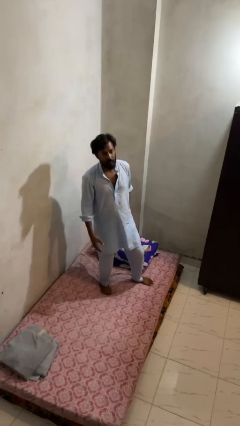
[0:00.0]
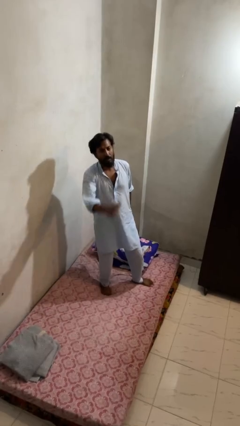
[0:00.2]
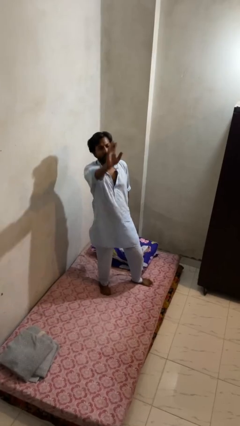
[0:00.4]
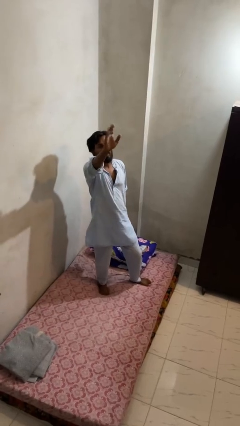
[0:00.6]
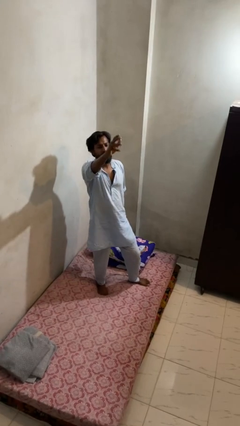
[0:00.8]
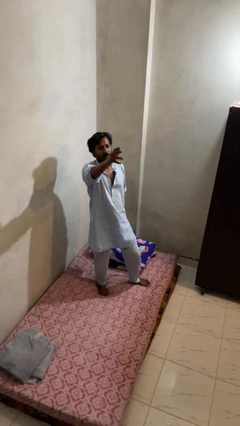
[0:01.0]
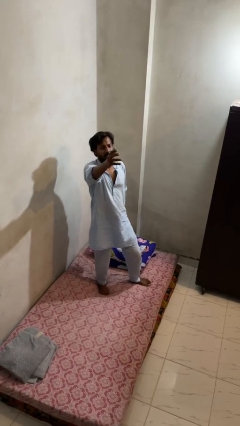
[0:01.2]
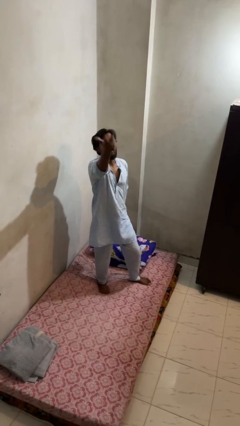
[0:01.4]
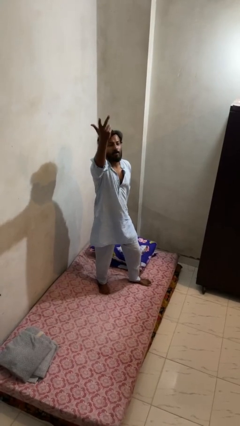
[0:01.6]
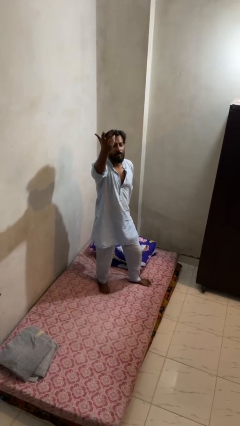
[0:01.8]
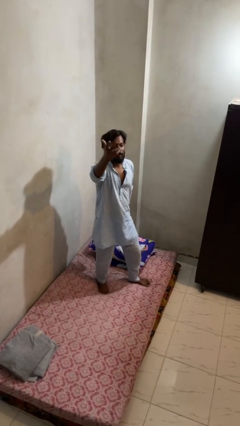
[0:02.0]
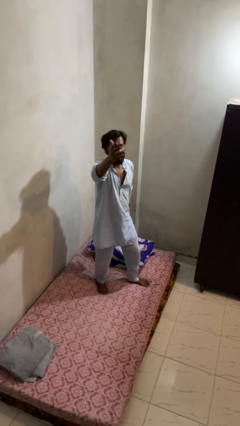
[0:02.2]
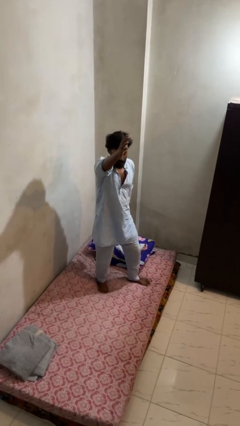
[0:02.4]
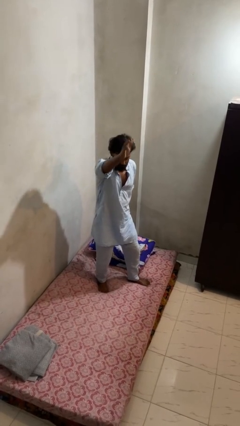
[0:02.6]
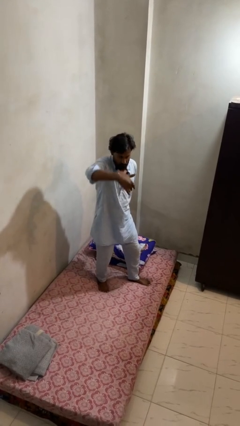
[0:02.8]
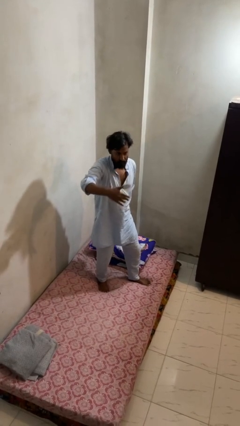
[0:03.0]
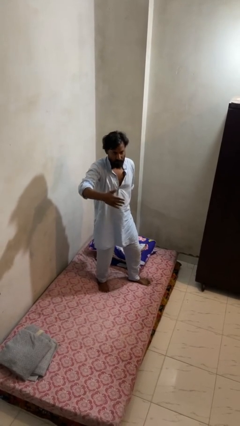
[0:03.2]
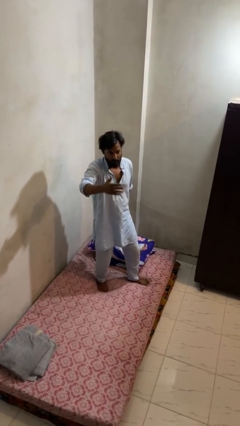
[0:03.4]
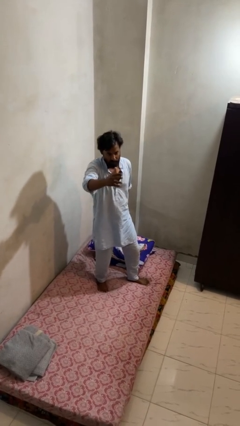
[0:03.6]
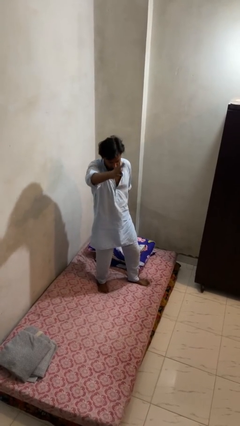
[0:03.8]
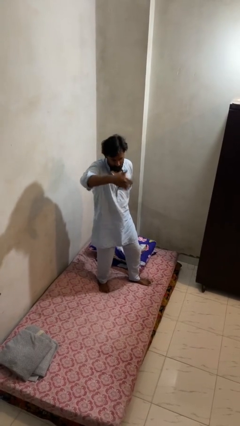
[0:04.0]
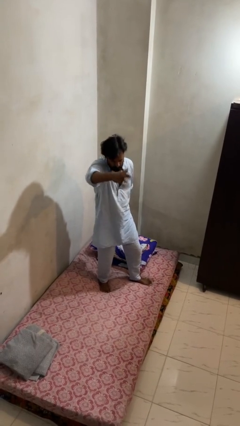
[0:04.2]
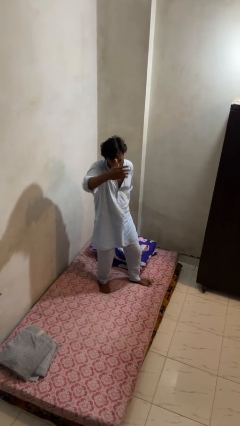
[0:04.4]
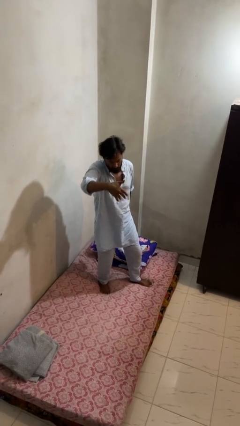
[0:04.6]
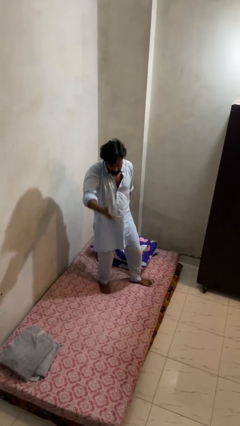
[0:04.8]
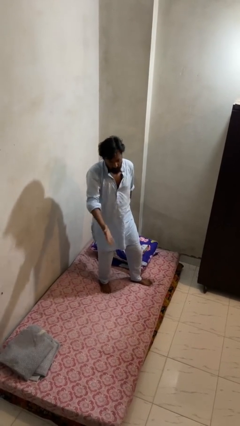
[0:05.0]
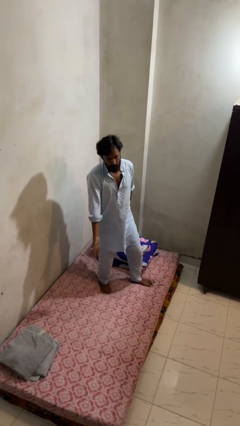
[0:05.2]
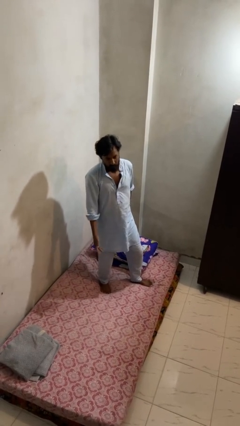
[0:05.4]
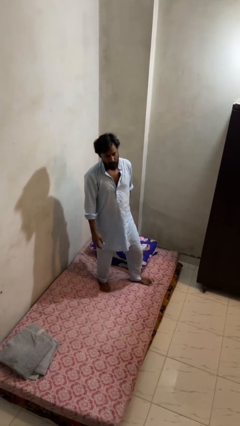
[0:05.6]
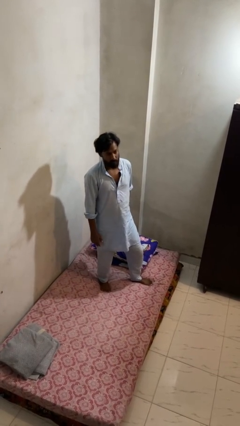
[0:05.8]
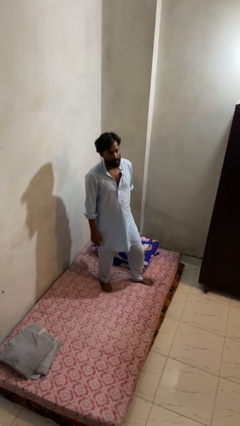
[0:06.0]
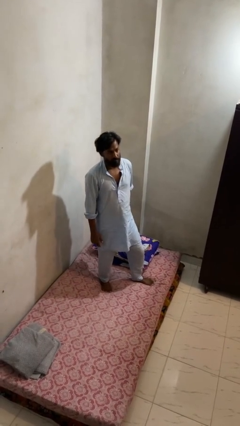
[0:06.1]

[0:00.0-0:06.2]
person gestures come here

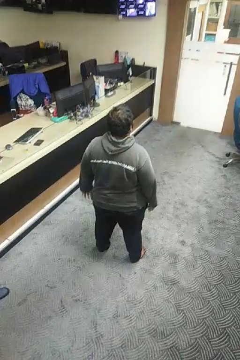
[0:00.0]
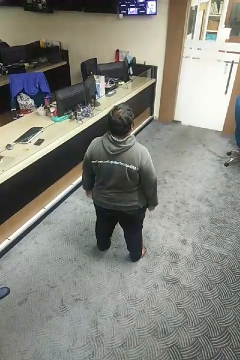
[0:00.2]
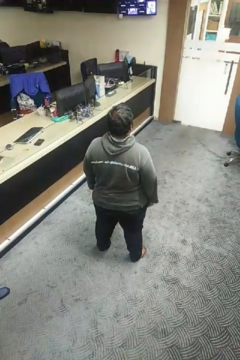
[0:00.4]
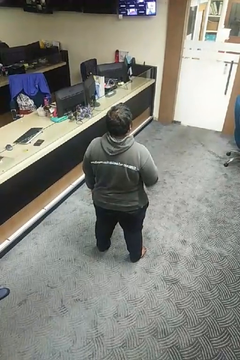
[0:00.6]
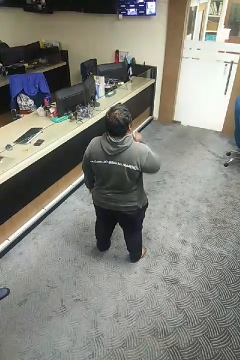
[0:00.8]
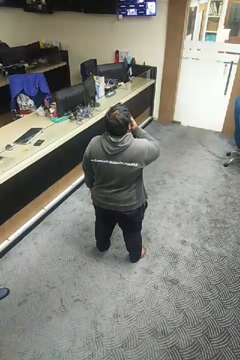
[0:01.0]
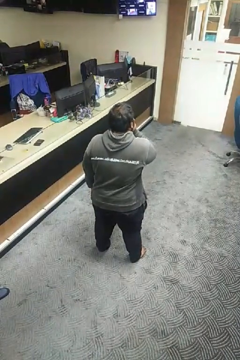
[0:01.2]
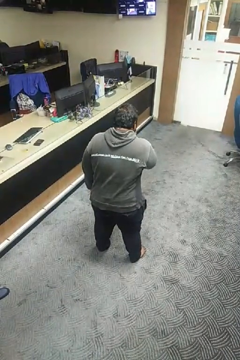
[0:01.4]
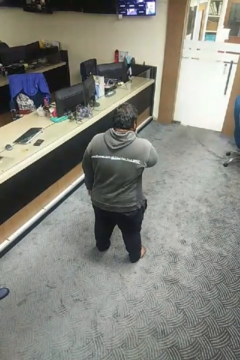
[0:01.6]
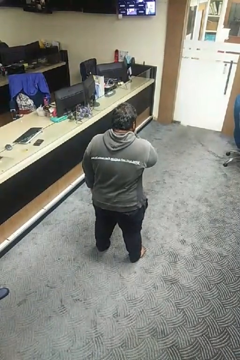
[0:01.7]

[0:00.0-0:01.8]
person sneezes into hand

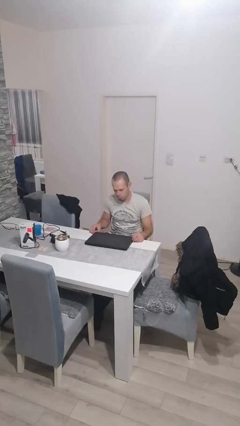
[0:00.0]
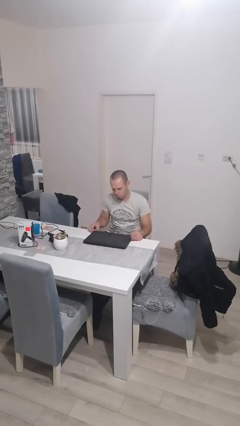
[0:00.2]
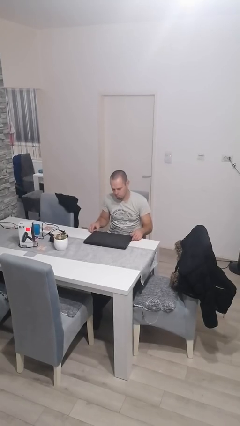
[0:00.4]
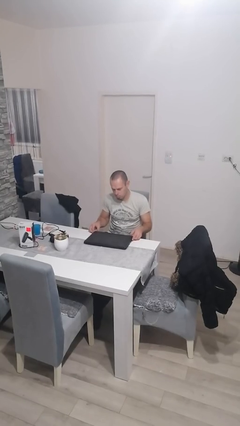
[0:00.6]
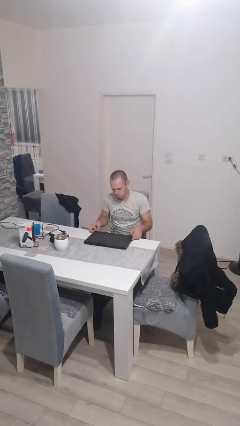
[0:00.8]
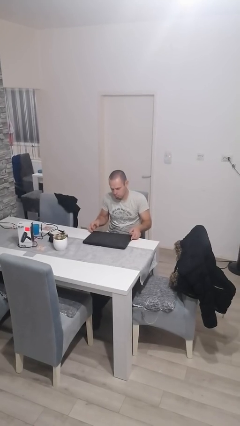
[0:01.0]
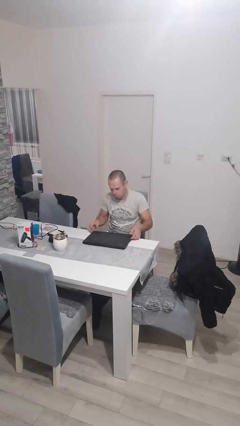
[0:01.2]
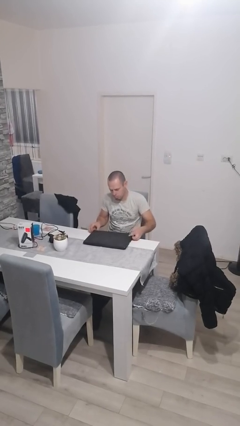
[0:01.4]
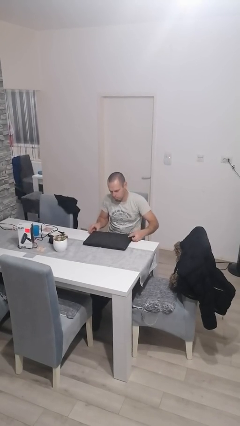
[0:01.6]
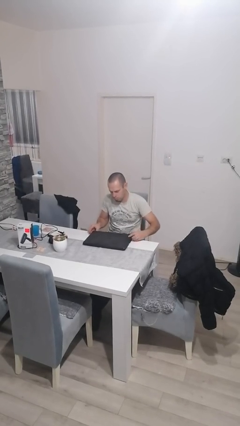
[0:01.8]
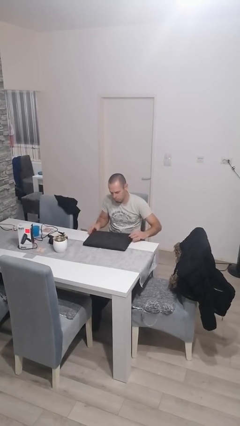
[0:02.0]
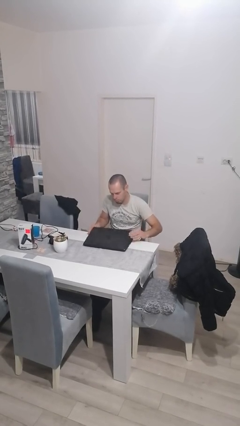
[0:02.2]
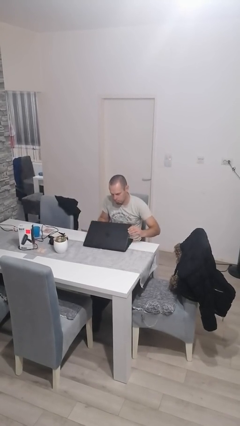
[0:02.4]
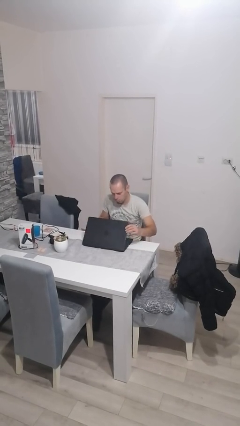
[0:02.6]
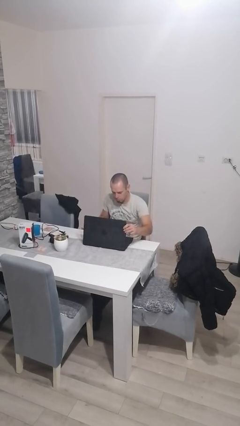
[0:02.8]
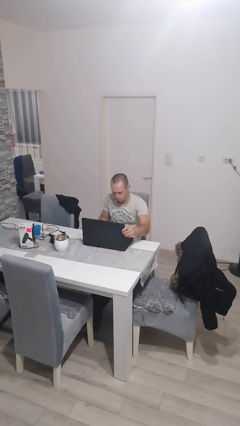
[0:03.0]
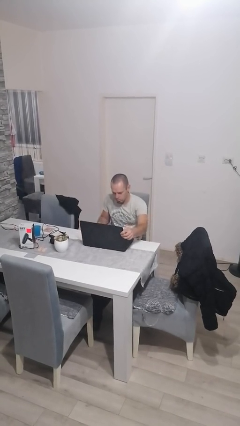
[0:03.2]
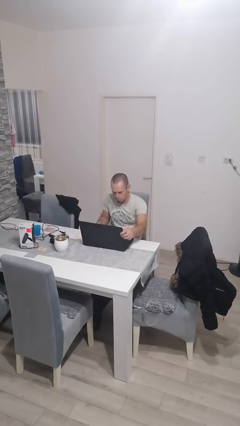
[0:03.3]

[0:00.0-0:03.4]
person opens laptop

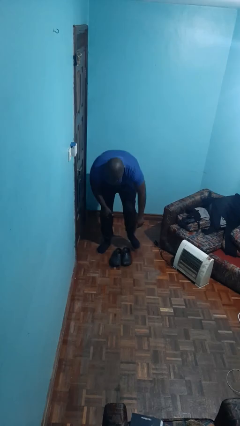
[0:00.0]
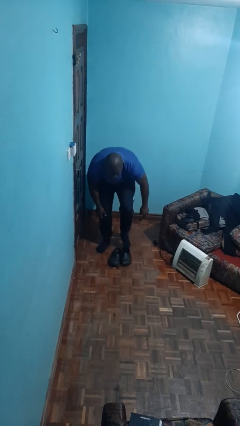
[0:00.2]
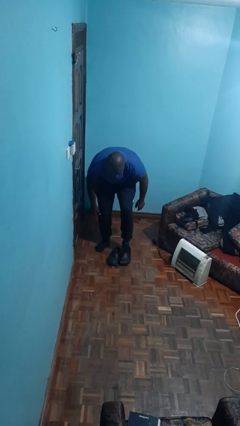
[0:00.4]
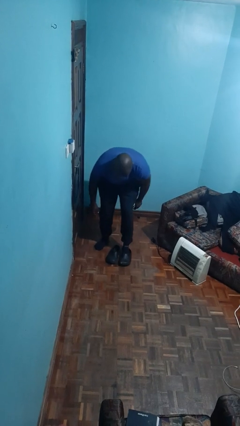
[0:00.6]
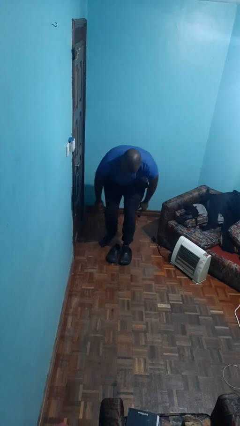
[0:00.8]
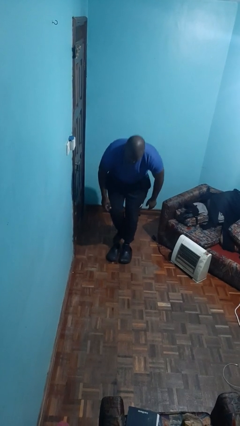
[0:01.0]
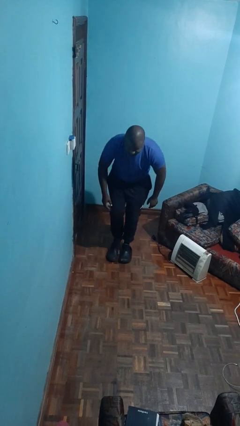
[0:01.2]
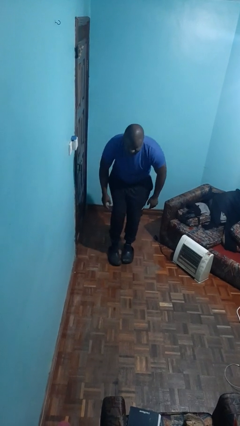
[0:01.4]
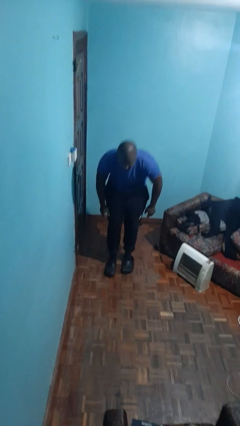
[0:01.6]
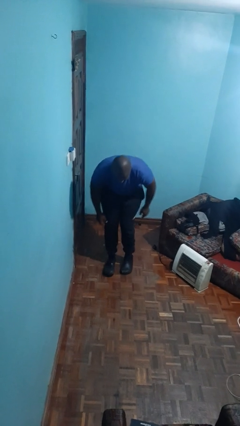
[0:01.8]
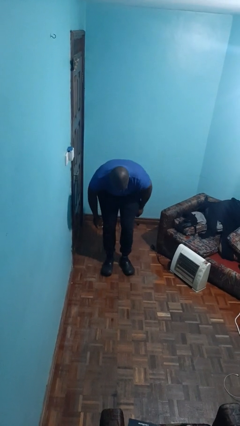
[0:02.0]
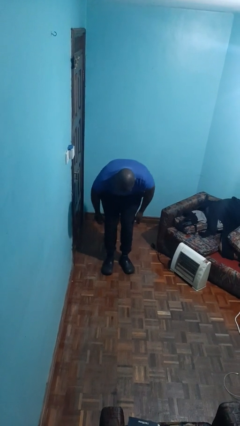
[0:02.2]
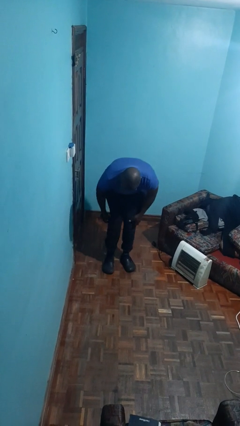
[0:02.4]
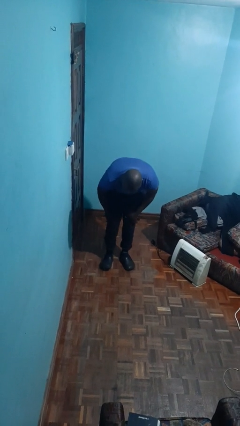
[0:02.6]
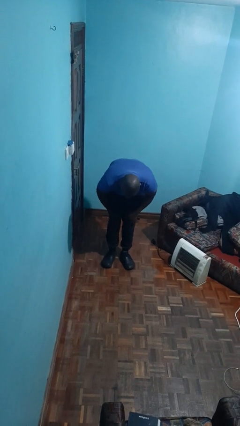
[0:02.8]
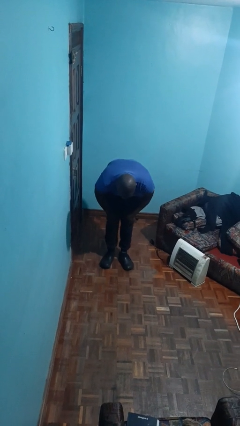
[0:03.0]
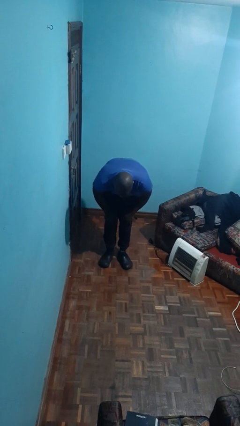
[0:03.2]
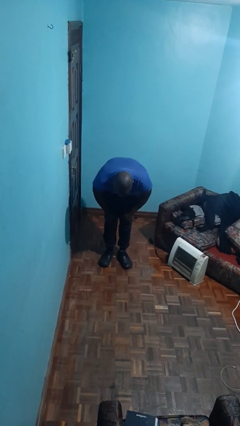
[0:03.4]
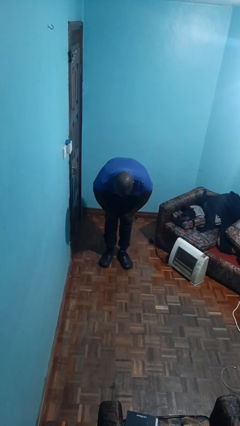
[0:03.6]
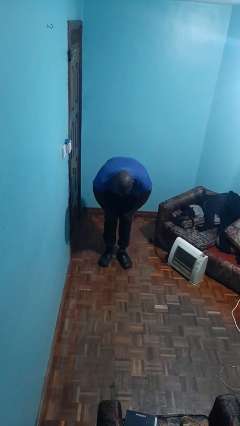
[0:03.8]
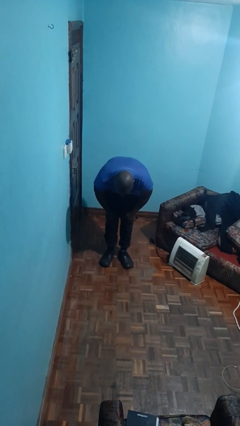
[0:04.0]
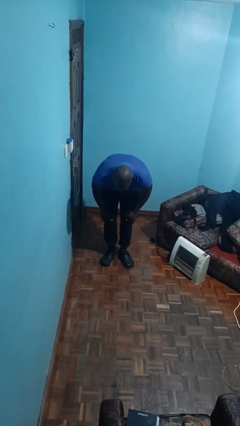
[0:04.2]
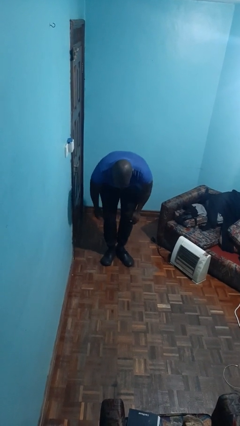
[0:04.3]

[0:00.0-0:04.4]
person puts on shoes

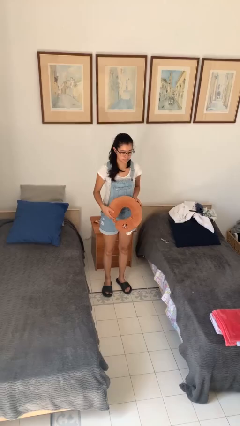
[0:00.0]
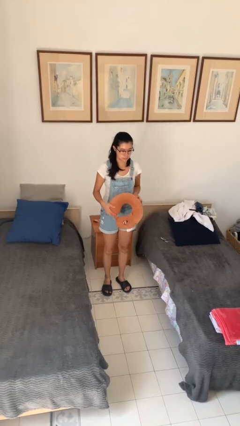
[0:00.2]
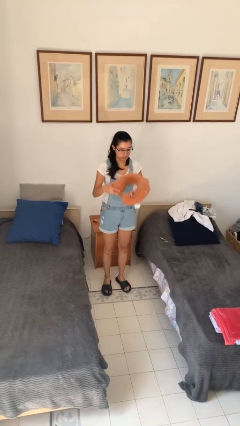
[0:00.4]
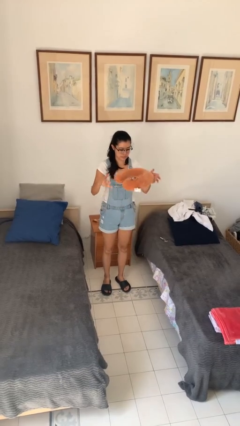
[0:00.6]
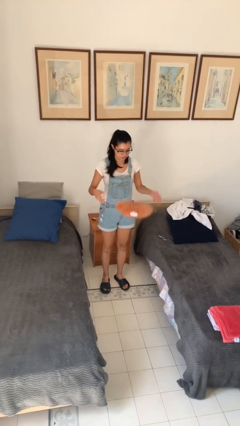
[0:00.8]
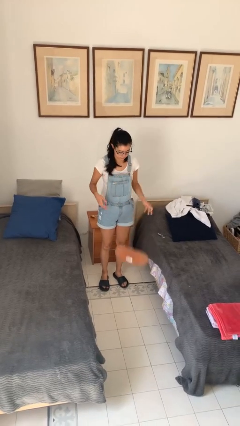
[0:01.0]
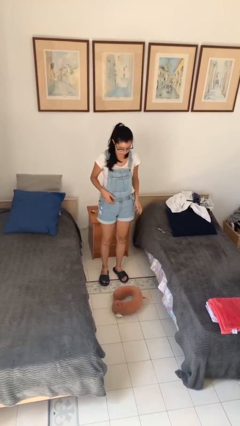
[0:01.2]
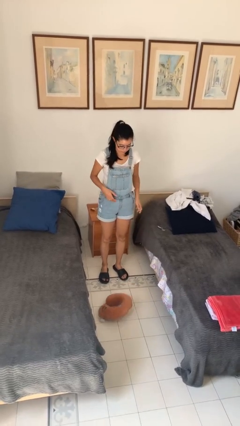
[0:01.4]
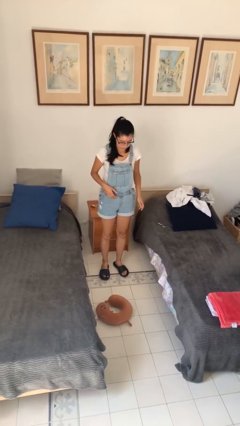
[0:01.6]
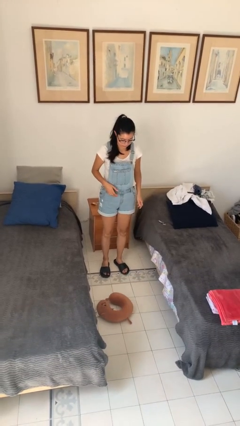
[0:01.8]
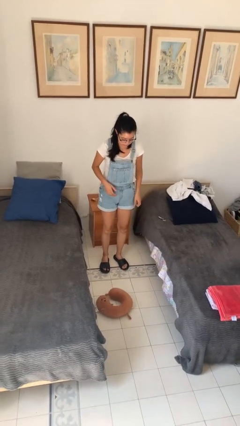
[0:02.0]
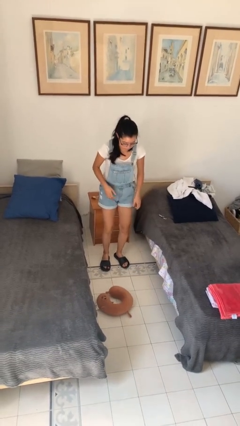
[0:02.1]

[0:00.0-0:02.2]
person throws object into air

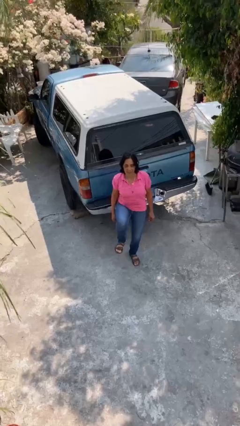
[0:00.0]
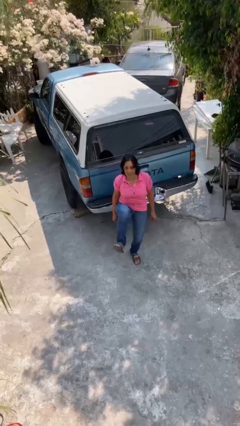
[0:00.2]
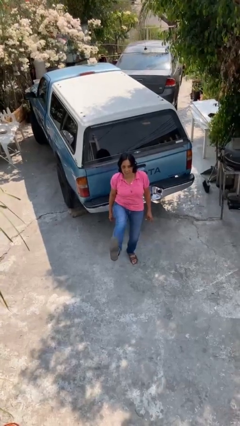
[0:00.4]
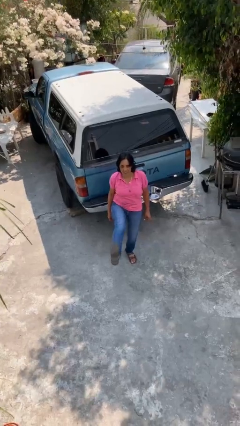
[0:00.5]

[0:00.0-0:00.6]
person karate kicks
